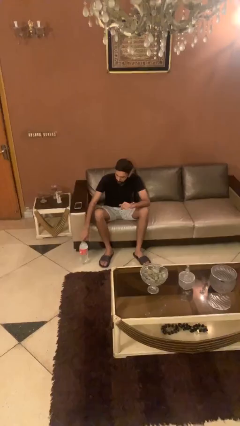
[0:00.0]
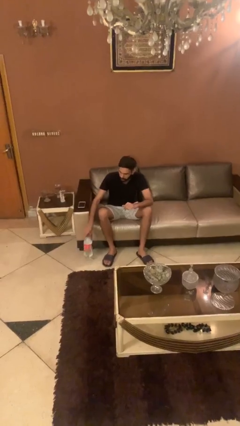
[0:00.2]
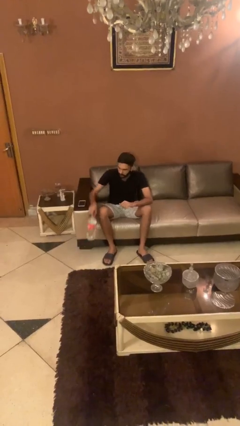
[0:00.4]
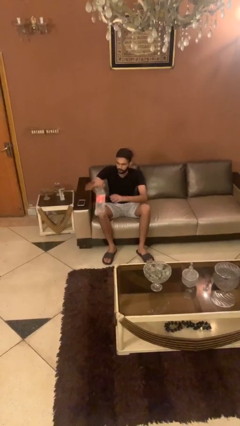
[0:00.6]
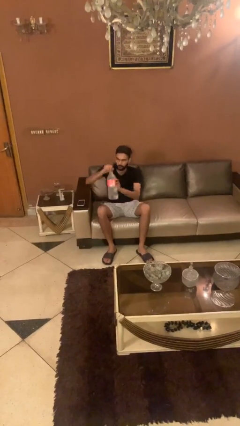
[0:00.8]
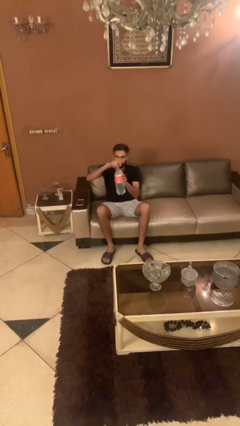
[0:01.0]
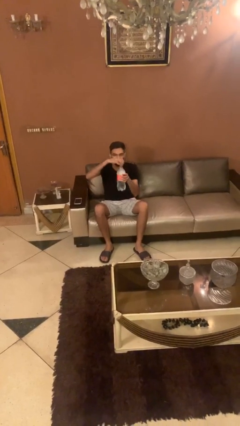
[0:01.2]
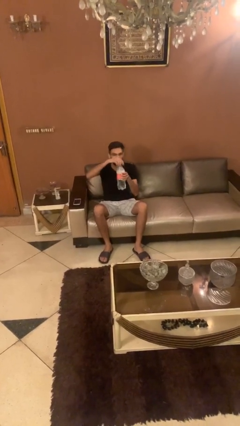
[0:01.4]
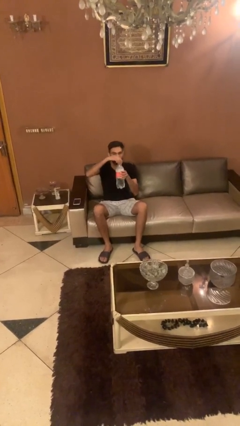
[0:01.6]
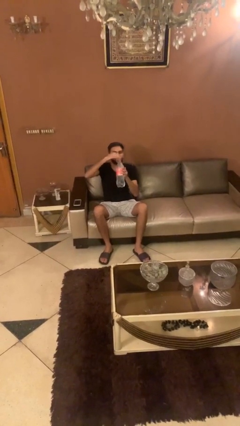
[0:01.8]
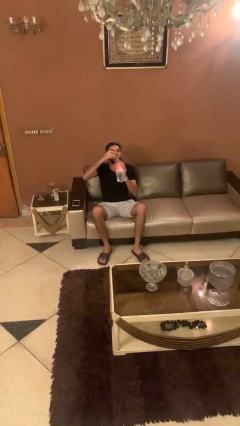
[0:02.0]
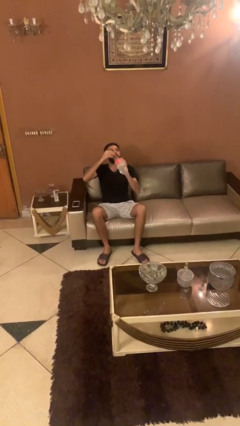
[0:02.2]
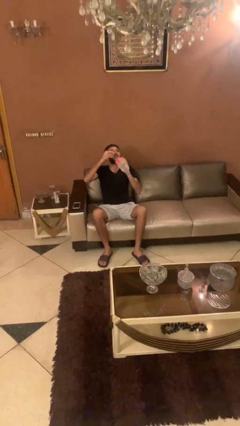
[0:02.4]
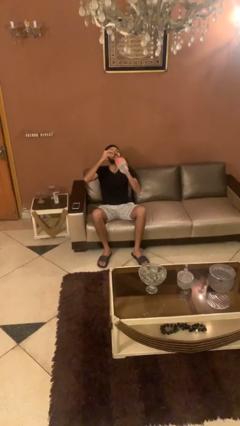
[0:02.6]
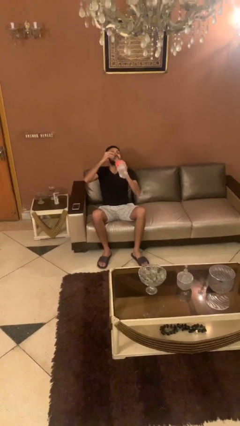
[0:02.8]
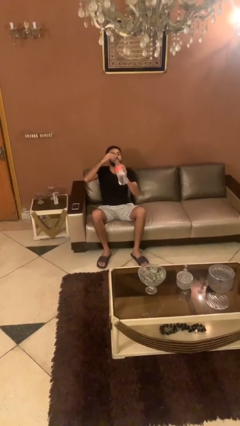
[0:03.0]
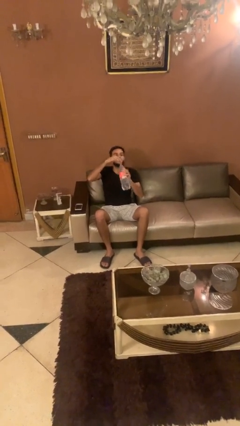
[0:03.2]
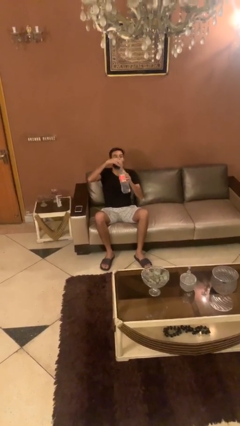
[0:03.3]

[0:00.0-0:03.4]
person picks up object from floor

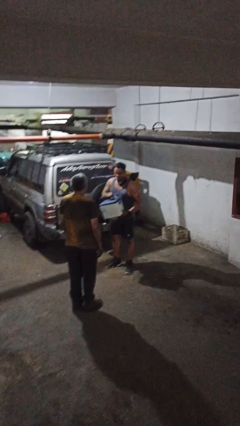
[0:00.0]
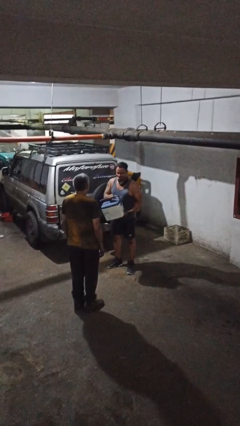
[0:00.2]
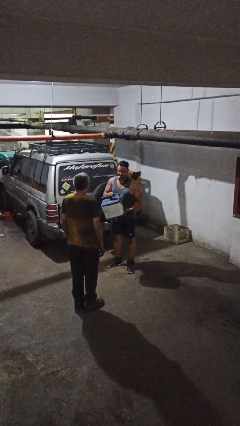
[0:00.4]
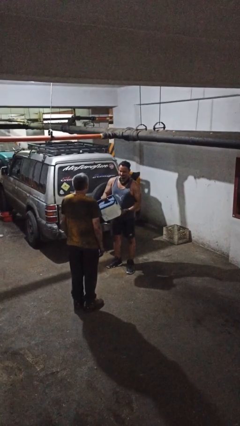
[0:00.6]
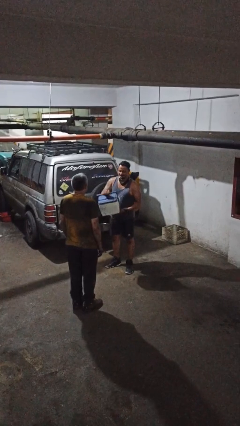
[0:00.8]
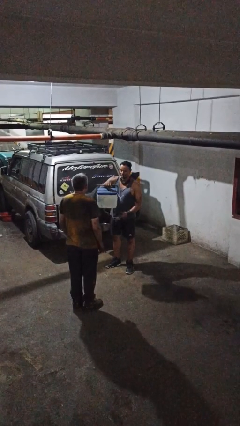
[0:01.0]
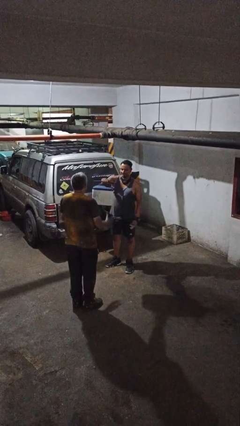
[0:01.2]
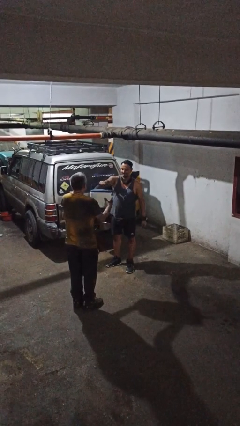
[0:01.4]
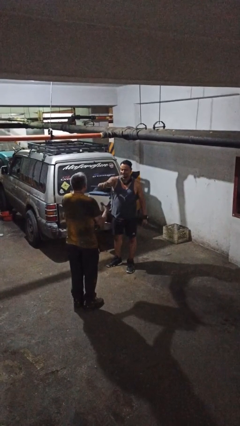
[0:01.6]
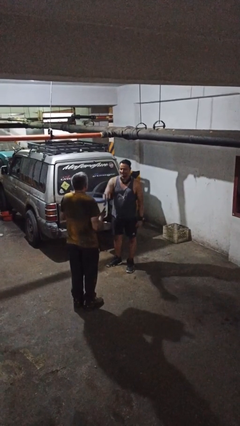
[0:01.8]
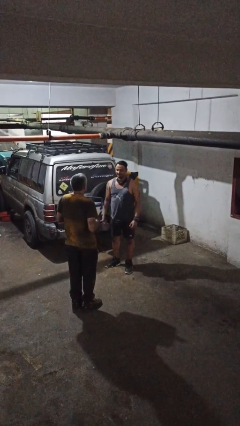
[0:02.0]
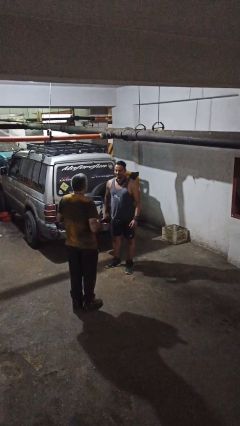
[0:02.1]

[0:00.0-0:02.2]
person transfers object to person

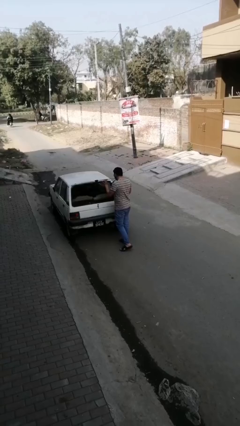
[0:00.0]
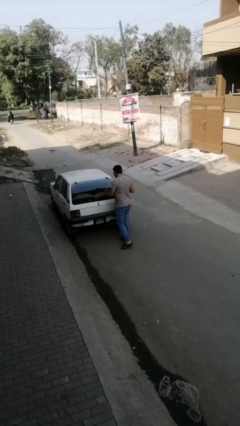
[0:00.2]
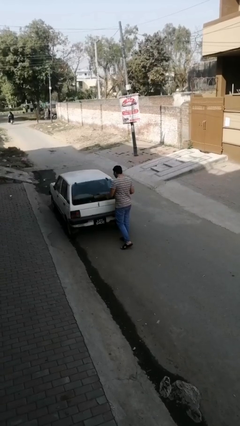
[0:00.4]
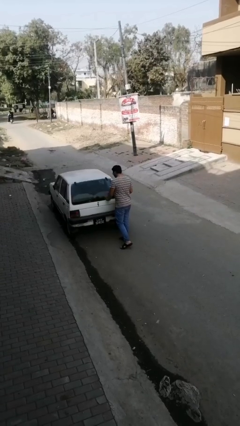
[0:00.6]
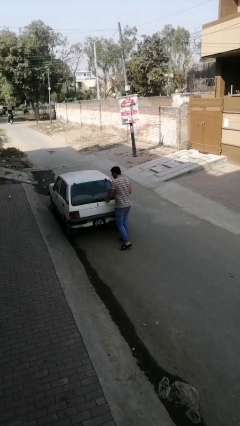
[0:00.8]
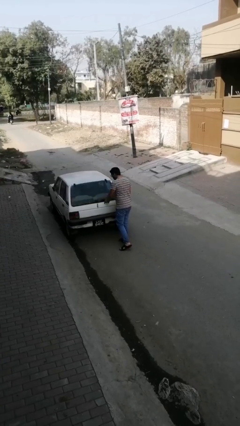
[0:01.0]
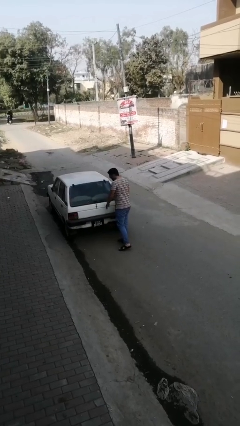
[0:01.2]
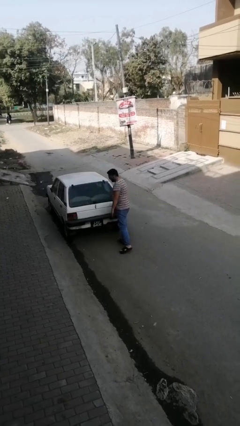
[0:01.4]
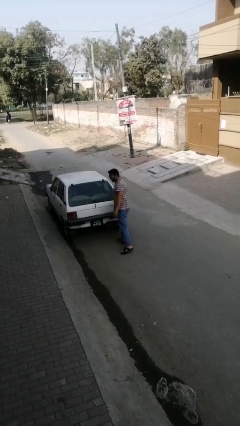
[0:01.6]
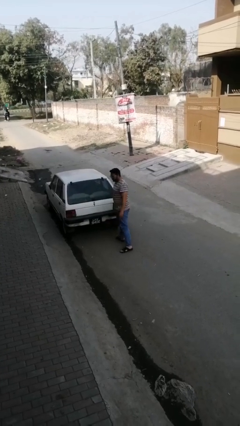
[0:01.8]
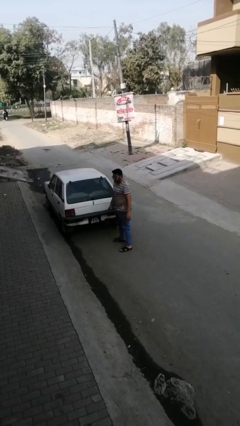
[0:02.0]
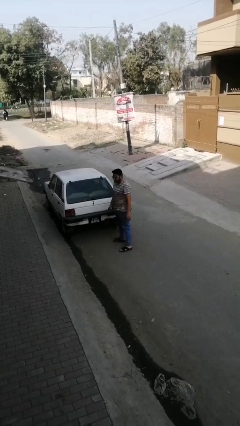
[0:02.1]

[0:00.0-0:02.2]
person closes car trunk

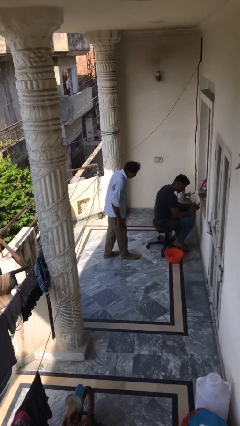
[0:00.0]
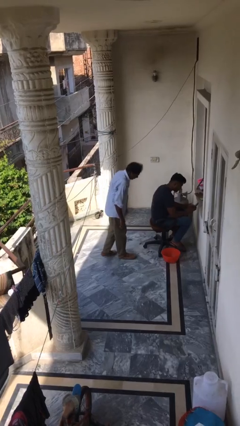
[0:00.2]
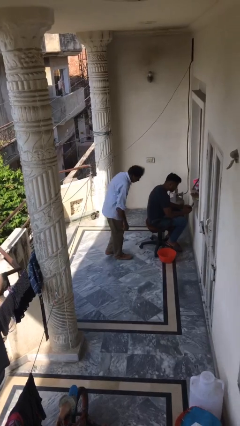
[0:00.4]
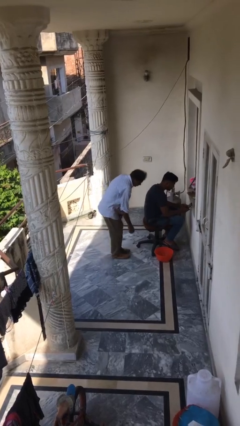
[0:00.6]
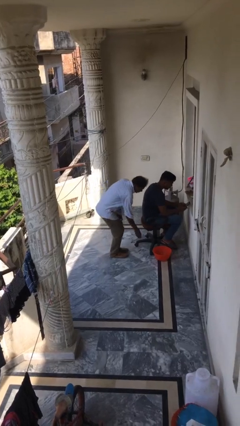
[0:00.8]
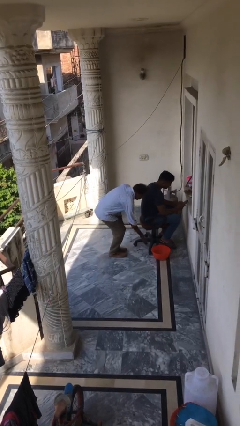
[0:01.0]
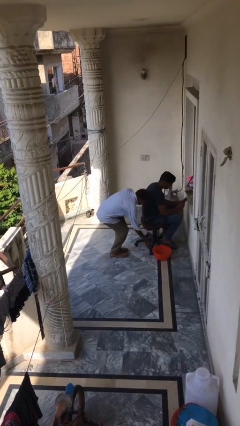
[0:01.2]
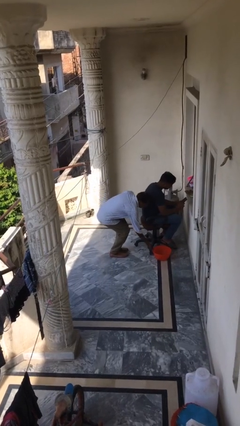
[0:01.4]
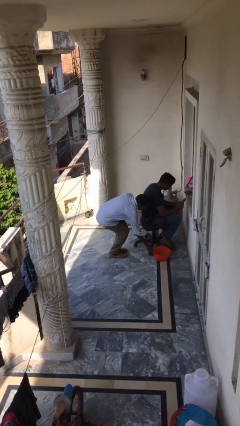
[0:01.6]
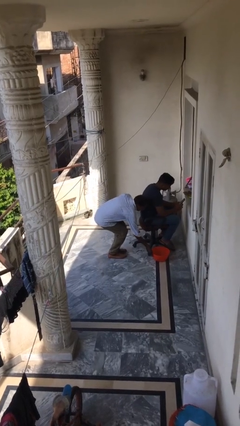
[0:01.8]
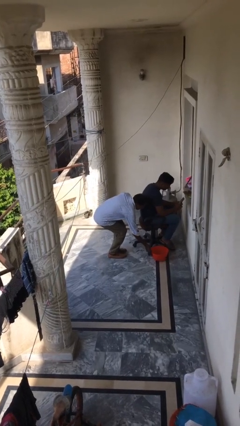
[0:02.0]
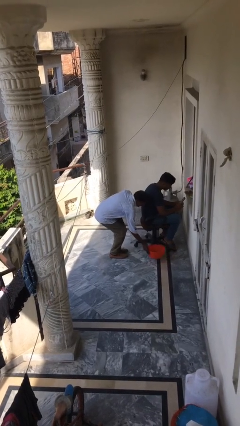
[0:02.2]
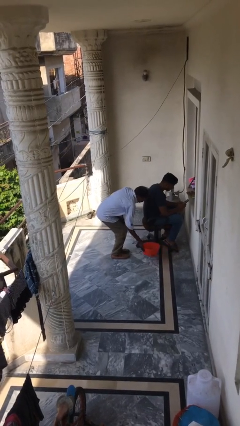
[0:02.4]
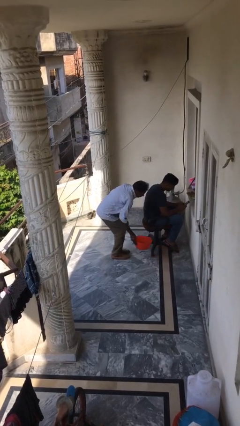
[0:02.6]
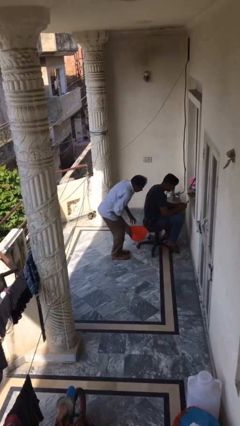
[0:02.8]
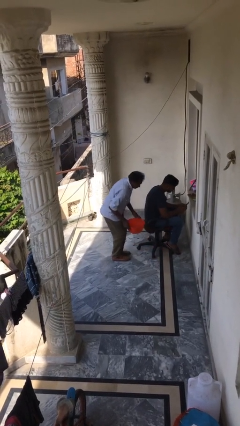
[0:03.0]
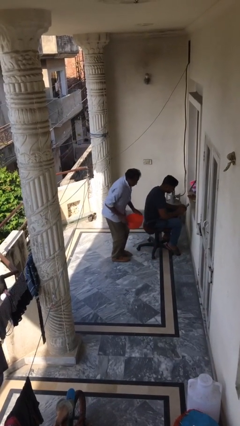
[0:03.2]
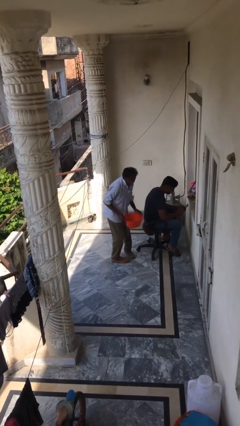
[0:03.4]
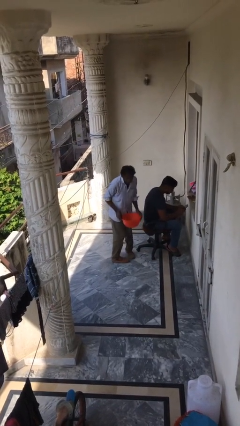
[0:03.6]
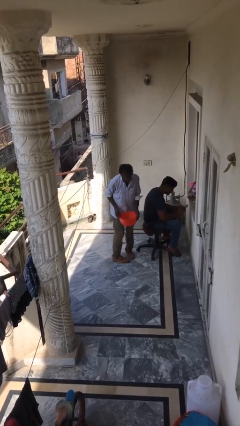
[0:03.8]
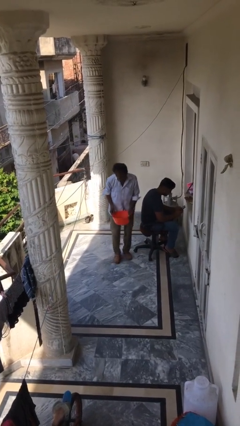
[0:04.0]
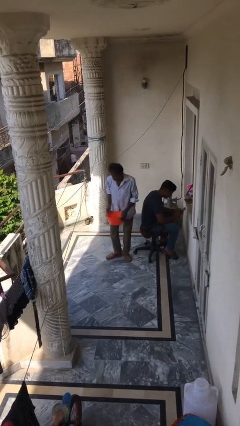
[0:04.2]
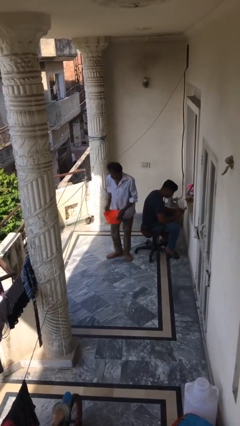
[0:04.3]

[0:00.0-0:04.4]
person steals object from person

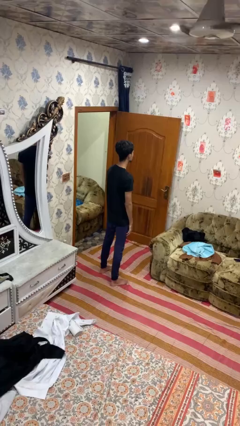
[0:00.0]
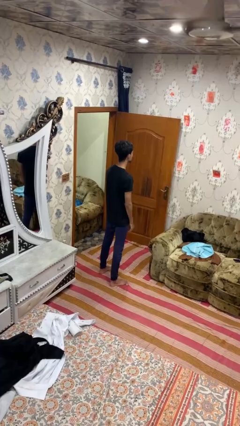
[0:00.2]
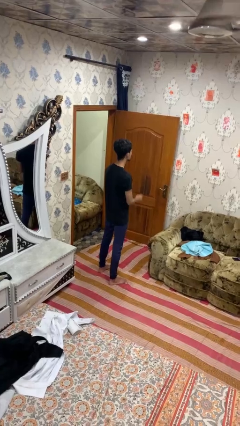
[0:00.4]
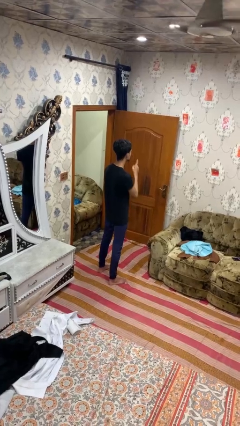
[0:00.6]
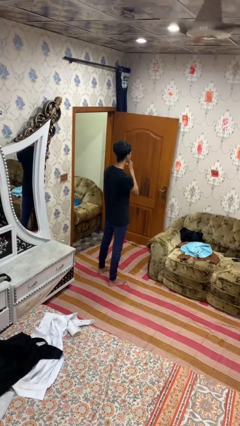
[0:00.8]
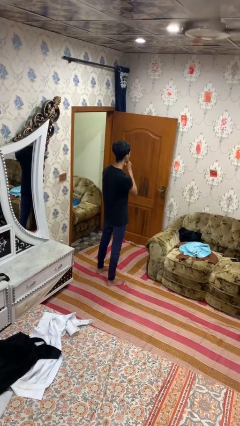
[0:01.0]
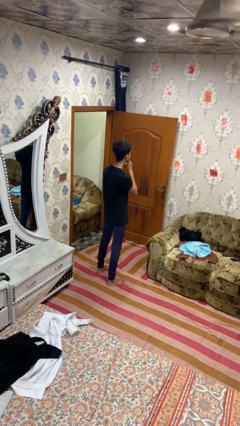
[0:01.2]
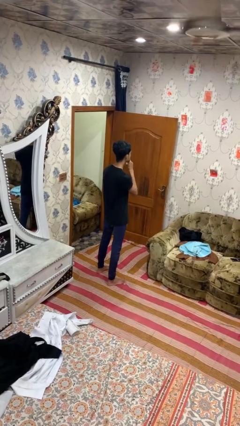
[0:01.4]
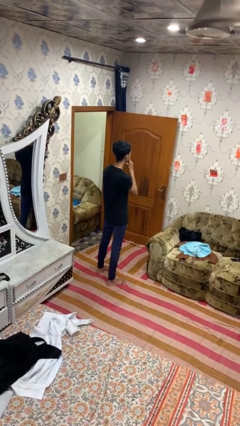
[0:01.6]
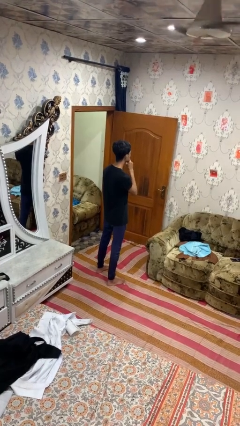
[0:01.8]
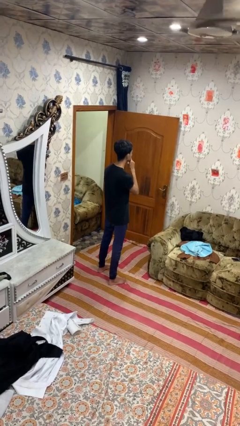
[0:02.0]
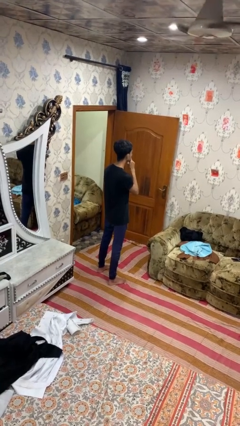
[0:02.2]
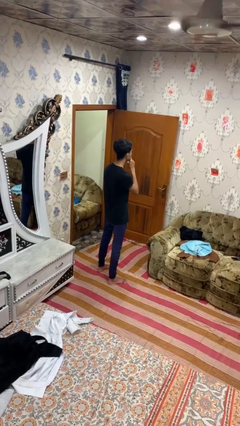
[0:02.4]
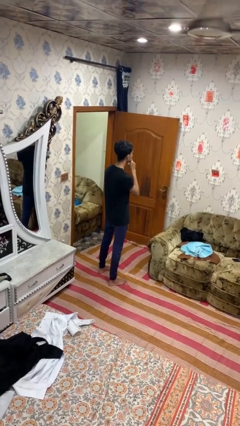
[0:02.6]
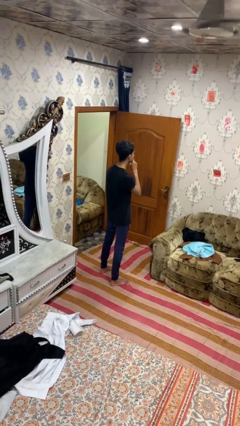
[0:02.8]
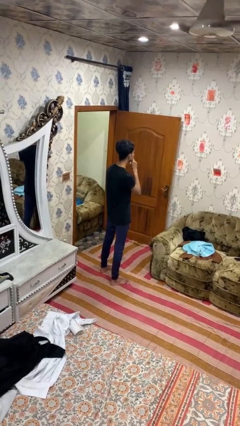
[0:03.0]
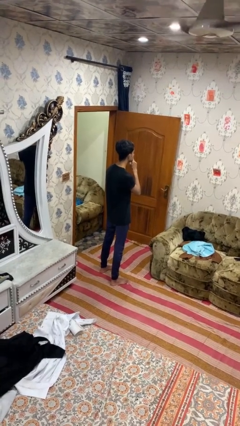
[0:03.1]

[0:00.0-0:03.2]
person gestures be quiet

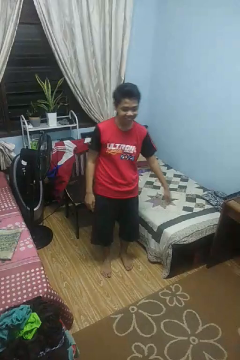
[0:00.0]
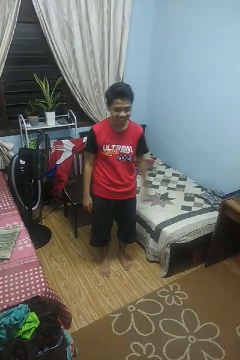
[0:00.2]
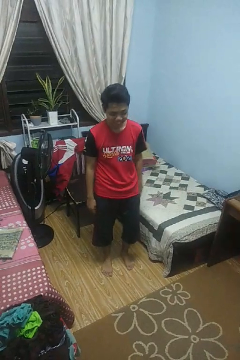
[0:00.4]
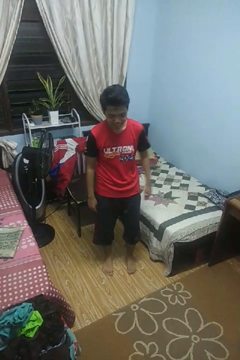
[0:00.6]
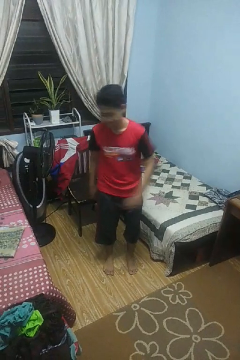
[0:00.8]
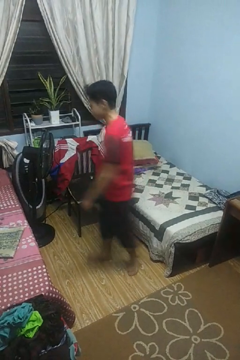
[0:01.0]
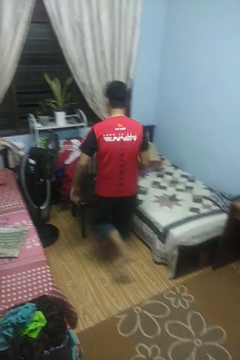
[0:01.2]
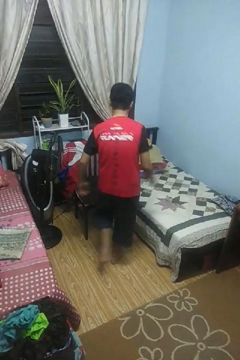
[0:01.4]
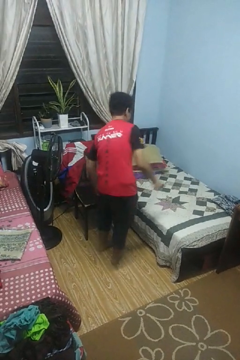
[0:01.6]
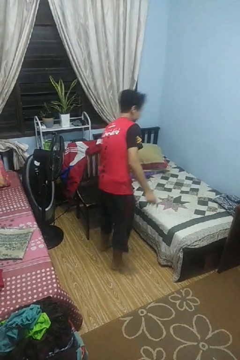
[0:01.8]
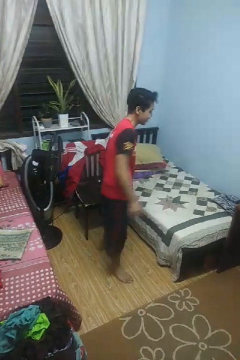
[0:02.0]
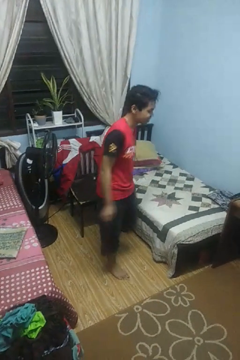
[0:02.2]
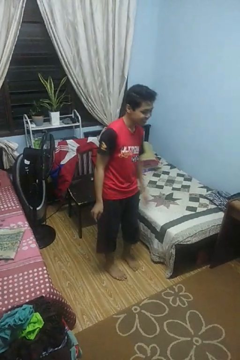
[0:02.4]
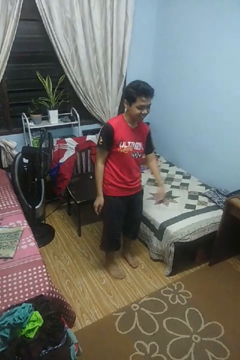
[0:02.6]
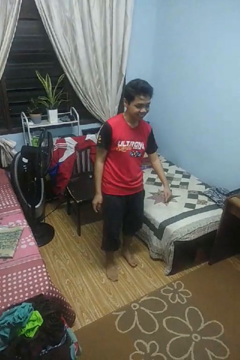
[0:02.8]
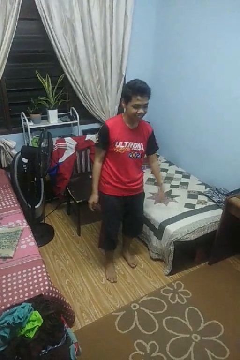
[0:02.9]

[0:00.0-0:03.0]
person twirls
